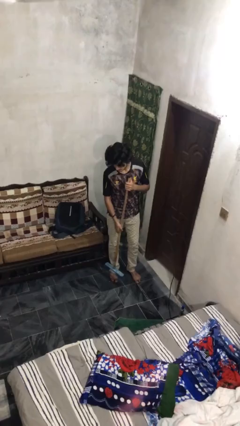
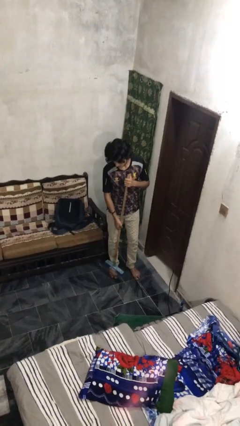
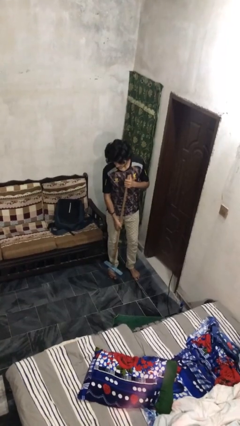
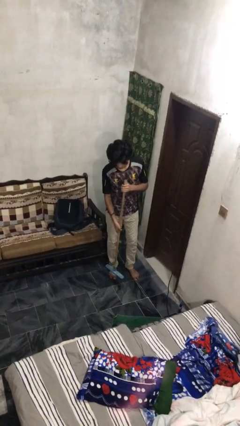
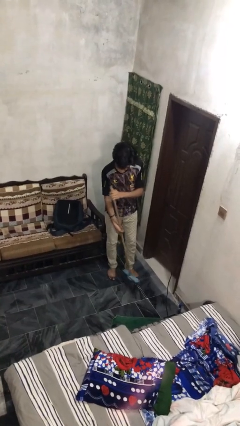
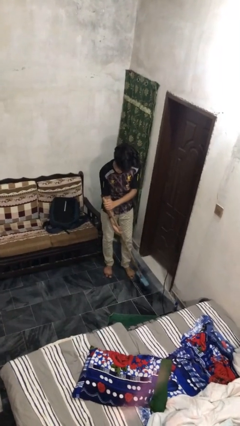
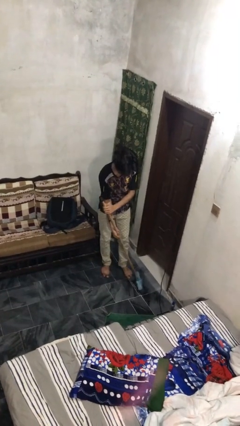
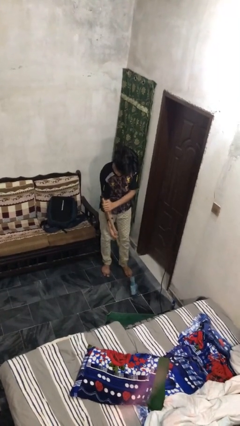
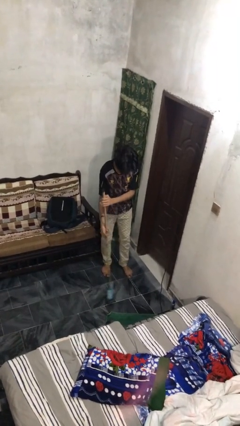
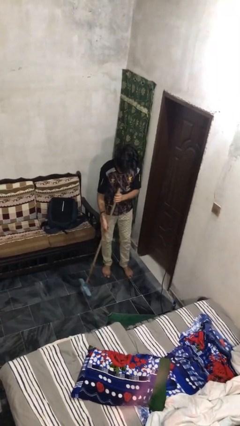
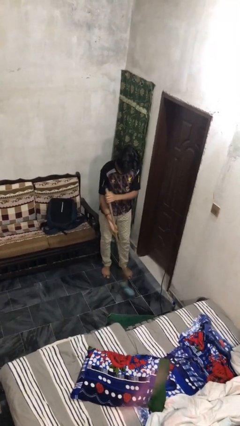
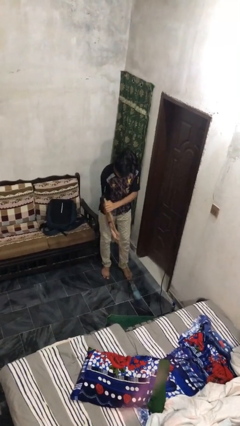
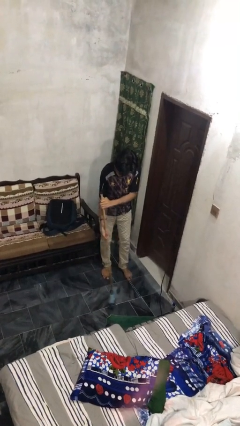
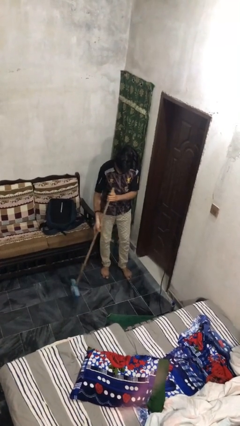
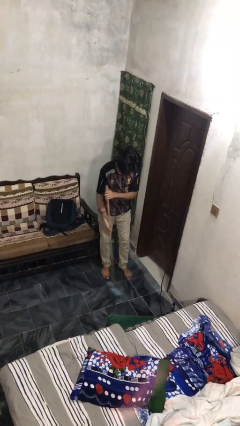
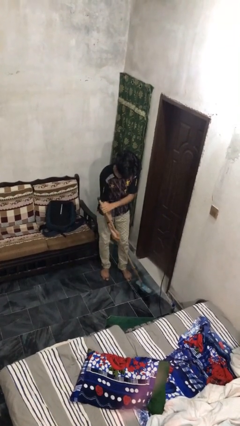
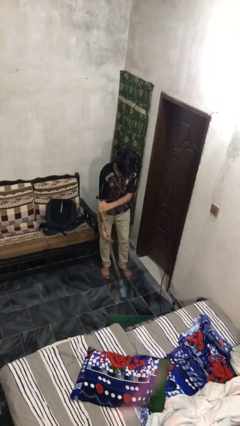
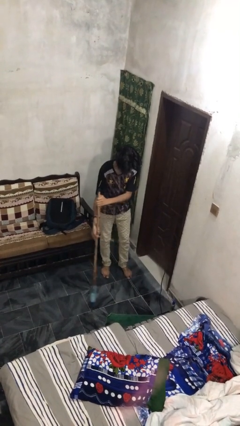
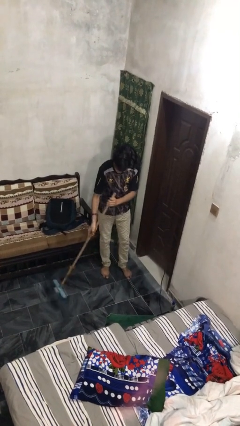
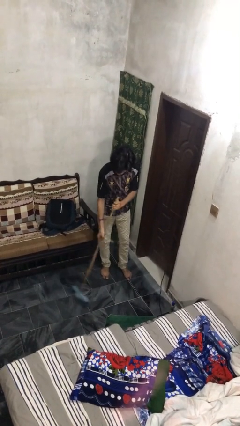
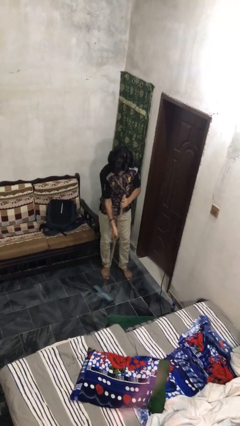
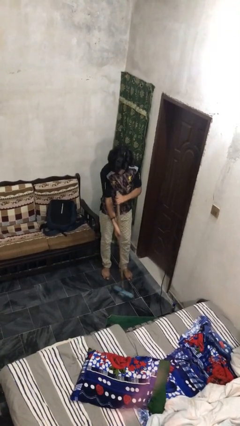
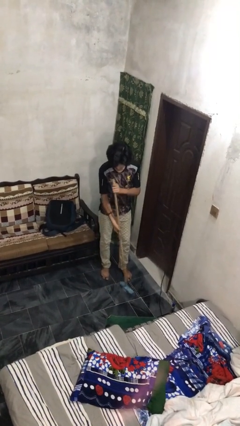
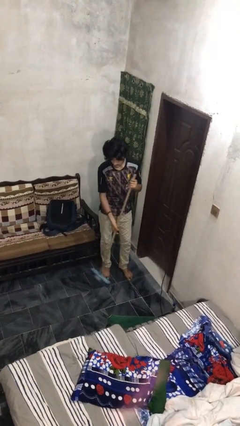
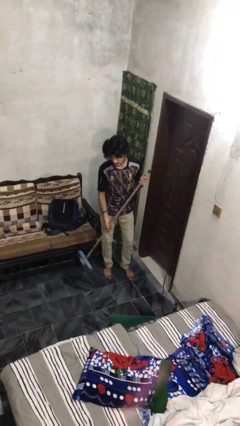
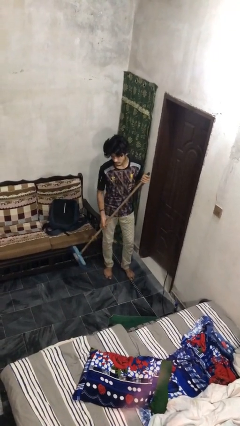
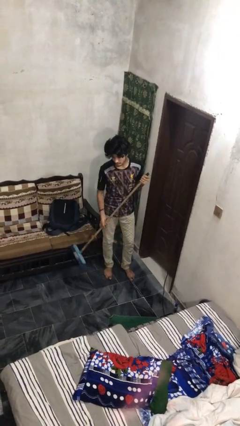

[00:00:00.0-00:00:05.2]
person sweeps floor

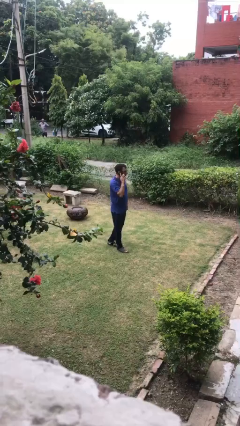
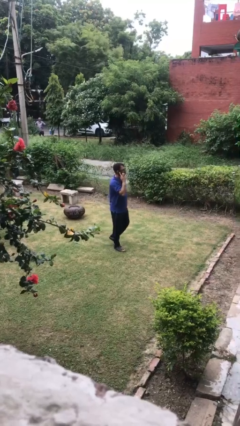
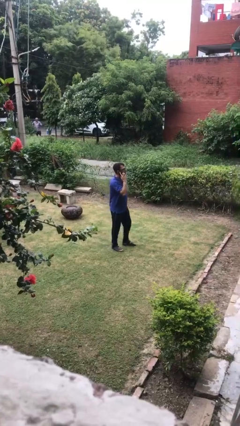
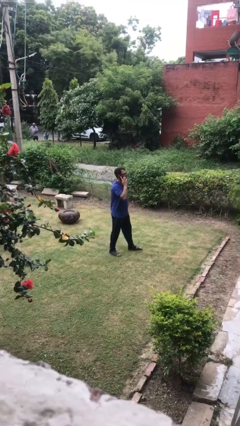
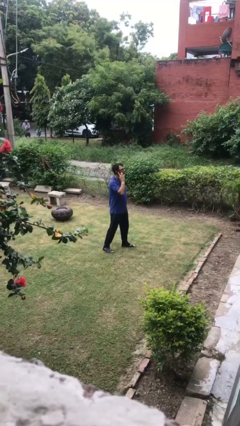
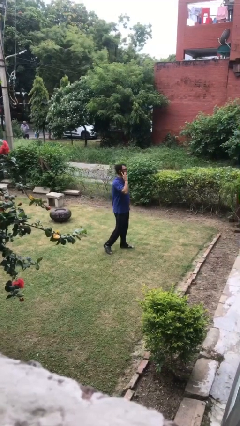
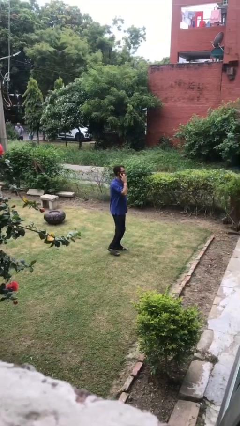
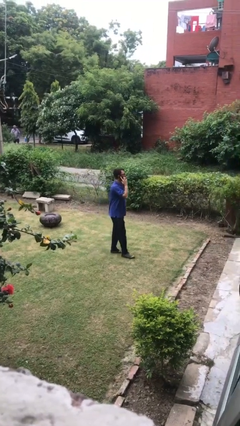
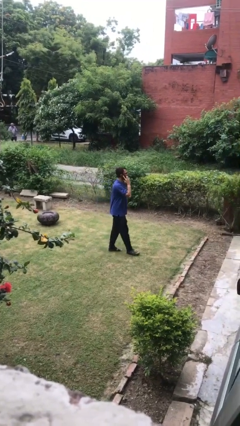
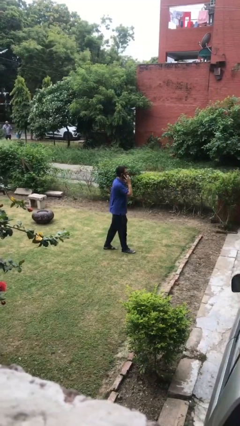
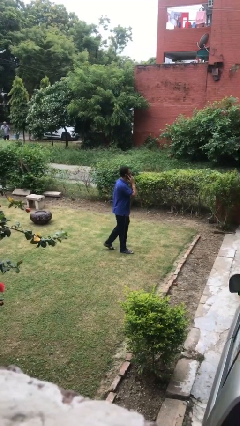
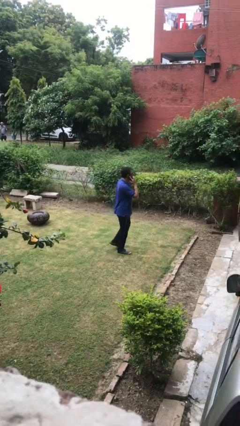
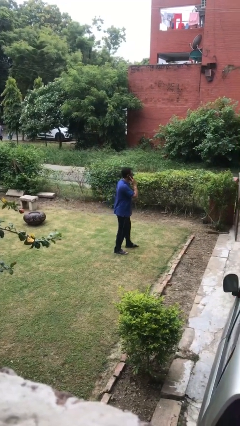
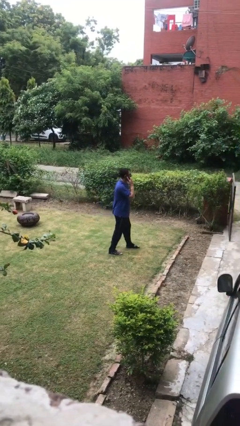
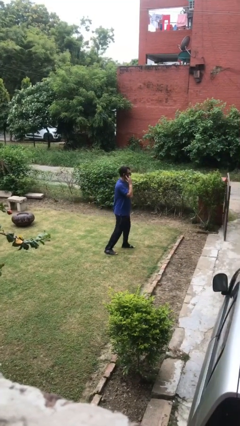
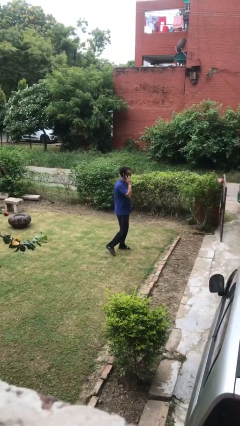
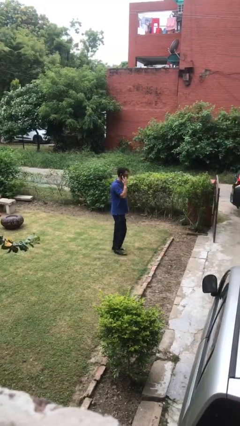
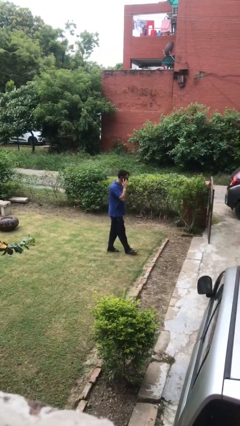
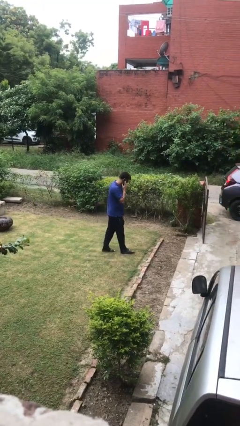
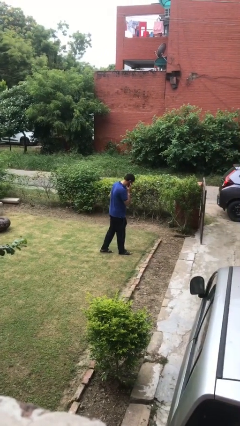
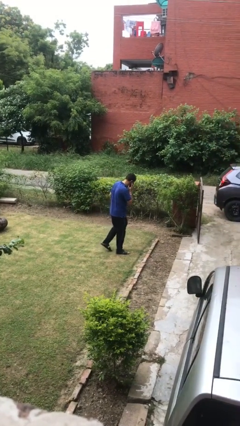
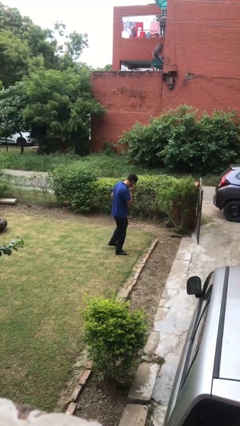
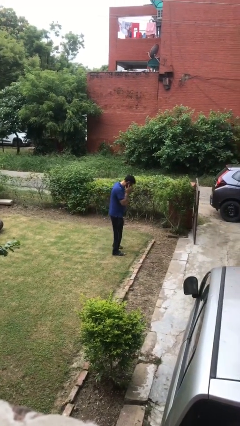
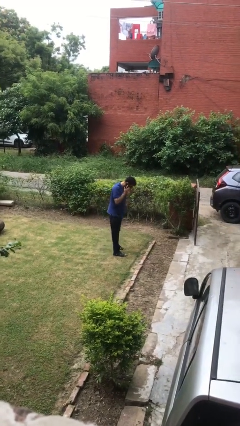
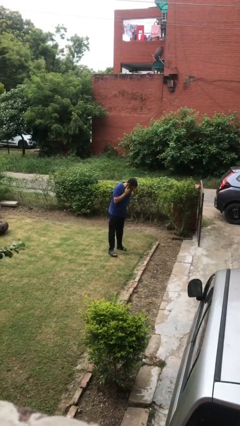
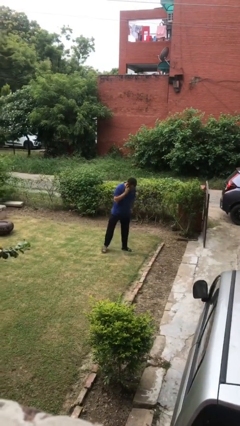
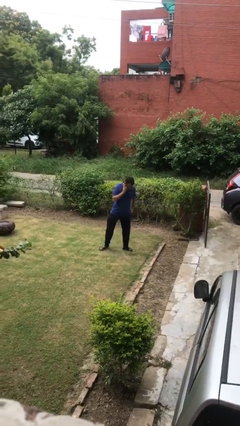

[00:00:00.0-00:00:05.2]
person talks on phone

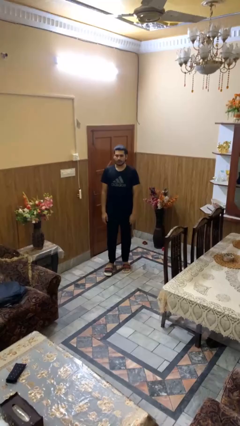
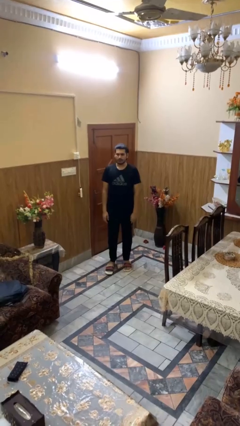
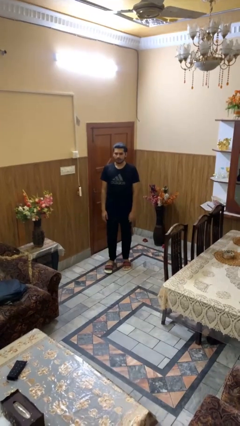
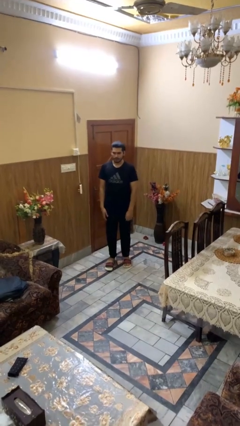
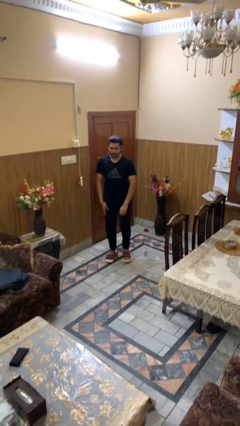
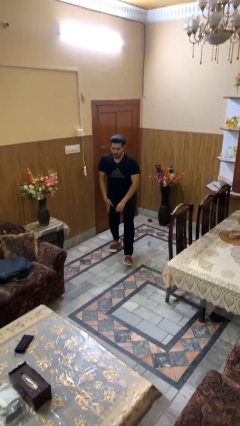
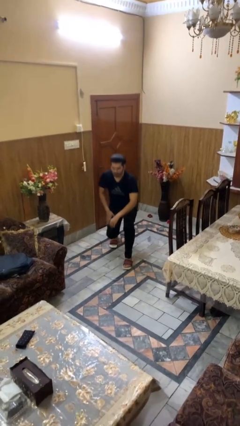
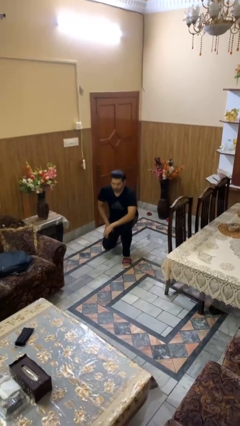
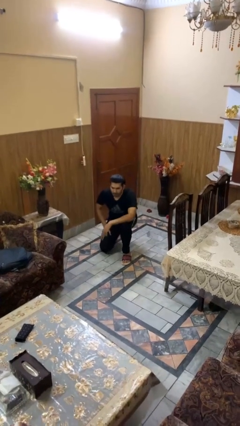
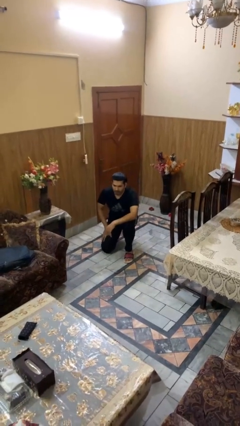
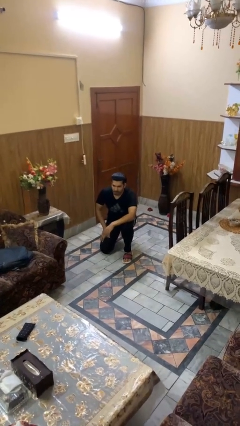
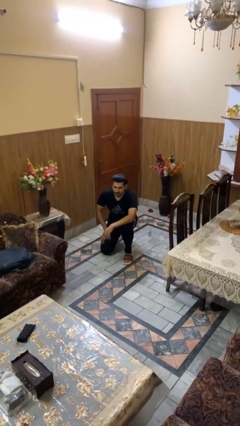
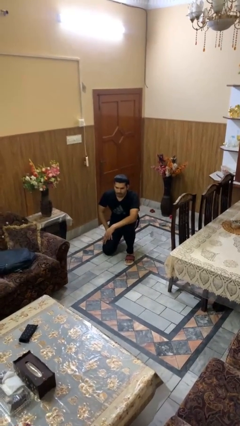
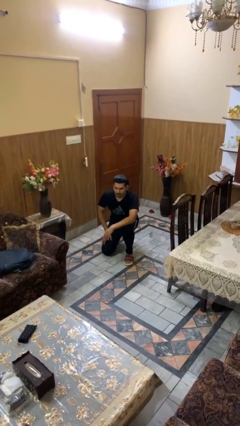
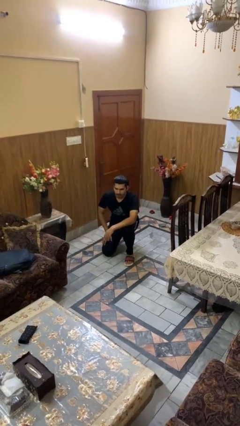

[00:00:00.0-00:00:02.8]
person kneels

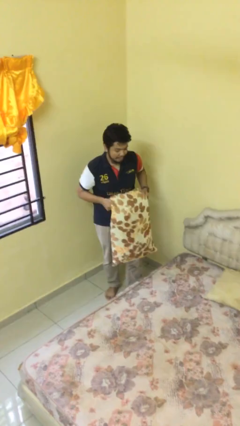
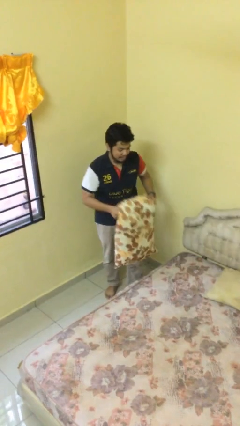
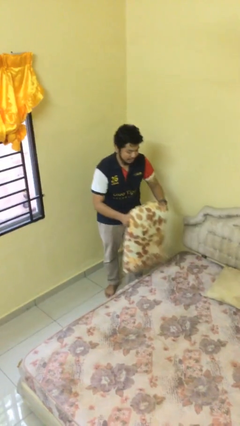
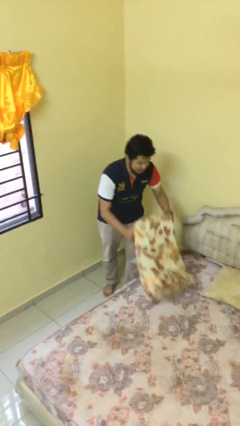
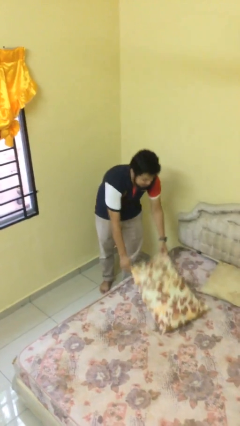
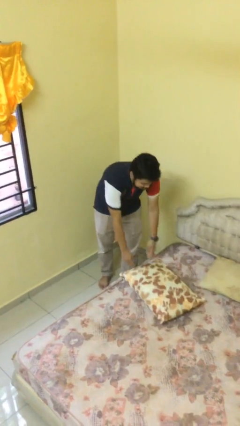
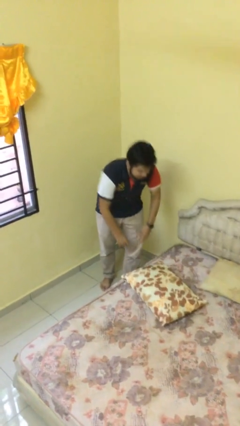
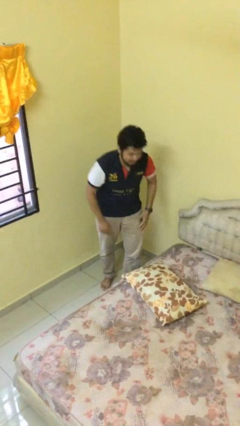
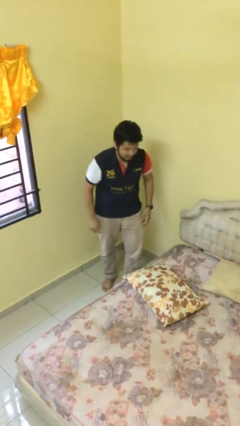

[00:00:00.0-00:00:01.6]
person puts down object on bed

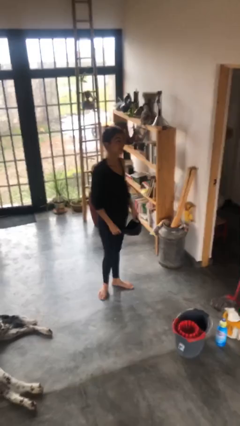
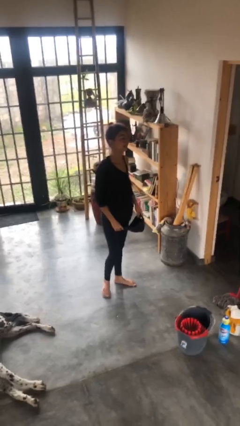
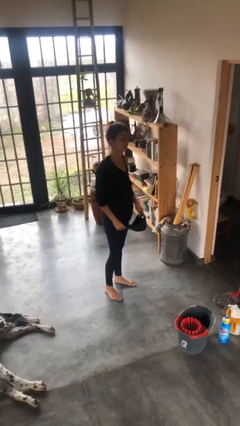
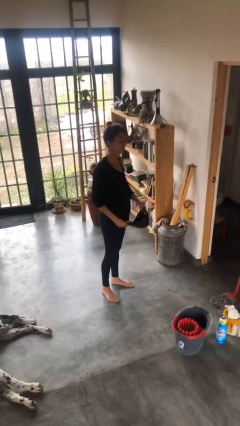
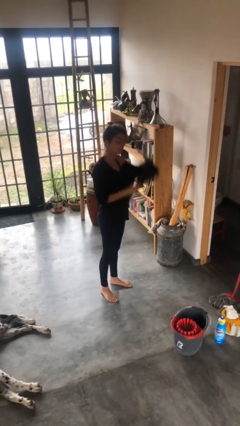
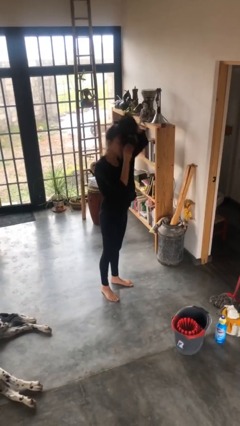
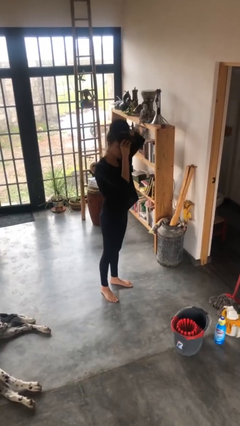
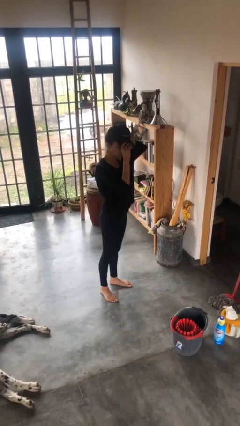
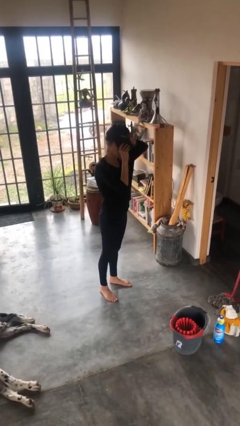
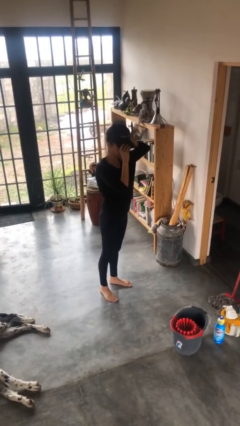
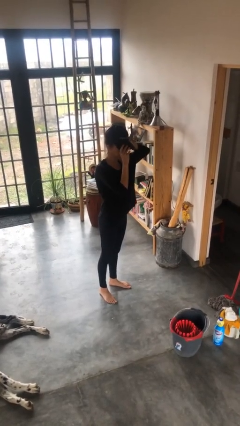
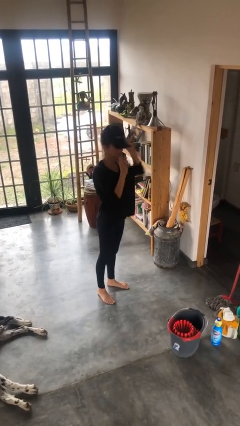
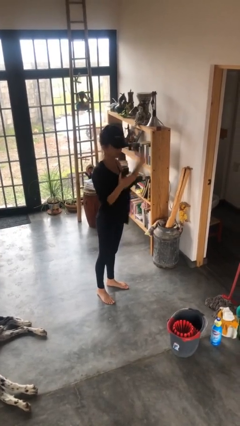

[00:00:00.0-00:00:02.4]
person puts on hat

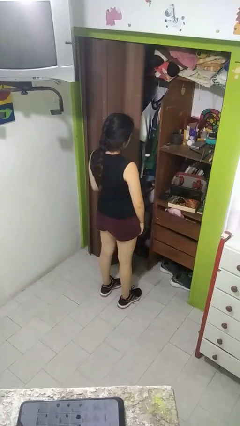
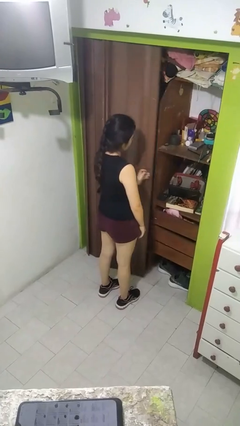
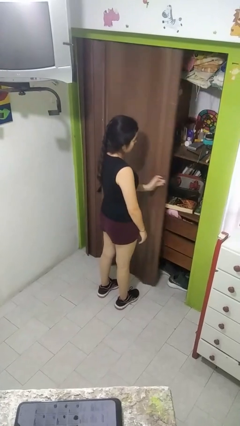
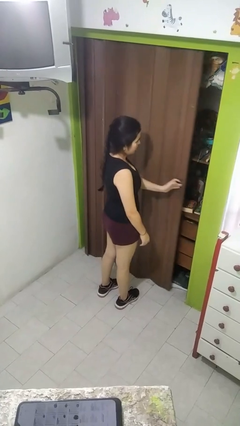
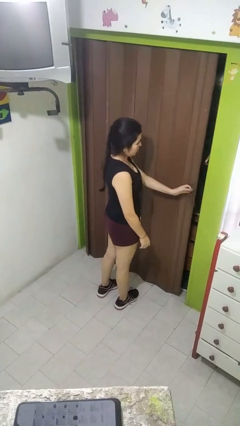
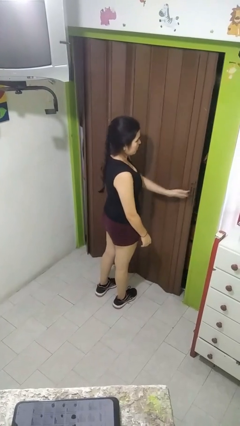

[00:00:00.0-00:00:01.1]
person closes closet door
